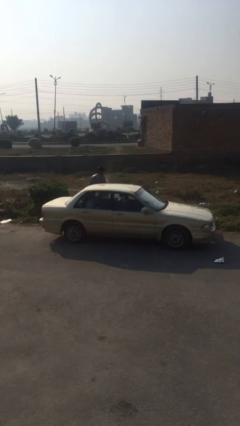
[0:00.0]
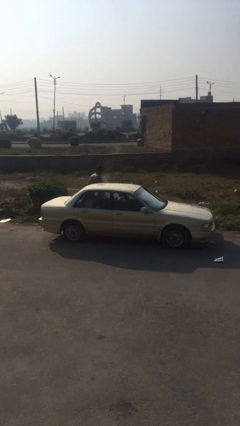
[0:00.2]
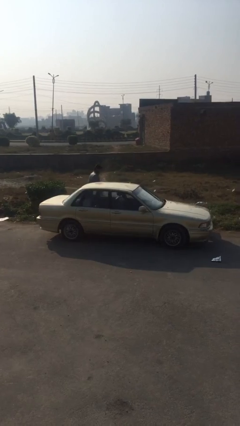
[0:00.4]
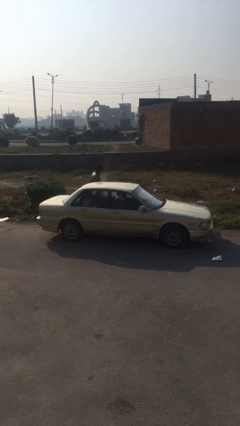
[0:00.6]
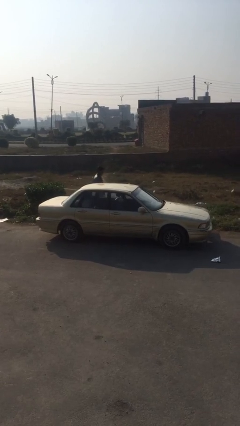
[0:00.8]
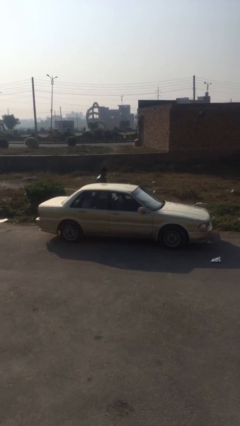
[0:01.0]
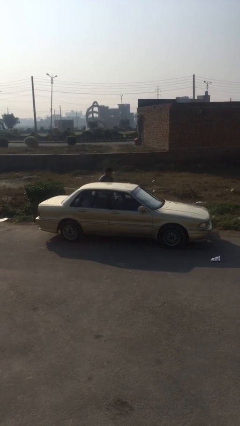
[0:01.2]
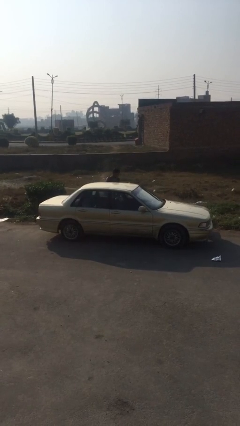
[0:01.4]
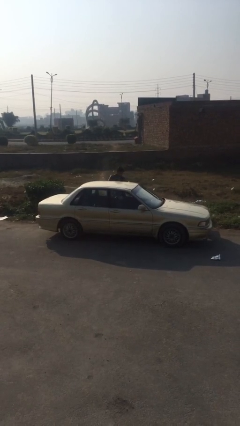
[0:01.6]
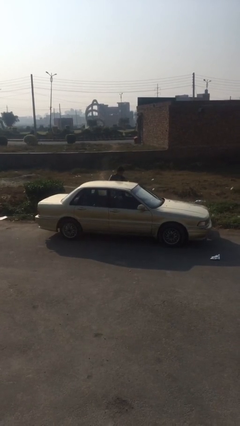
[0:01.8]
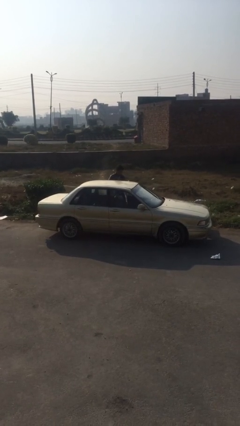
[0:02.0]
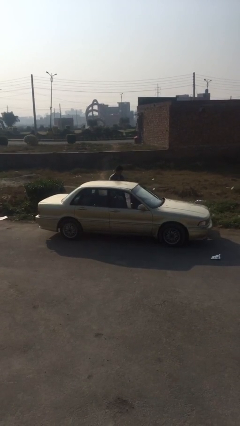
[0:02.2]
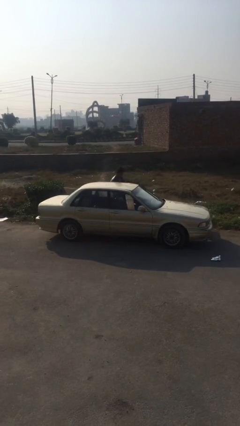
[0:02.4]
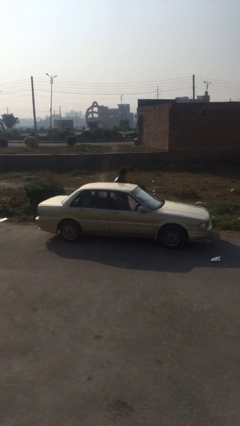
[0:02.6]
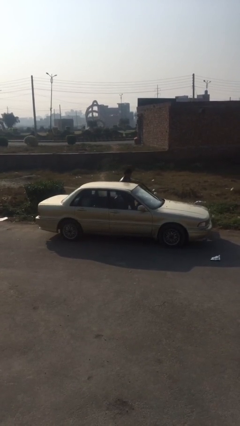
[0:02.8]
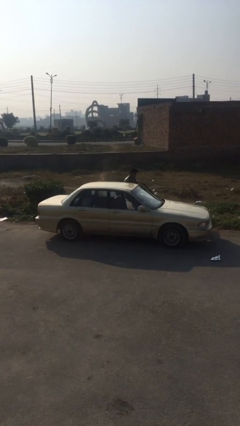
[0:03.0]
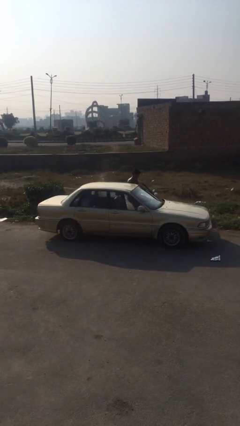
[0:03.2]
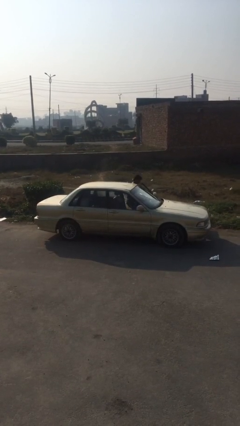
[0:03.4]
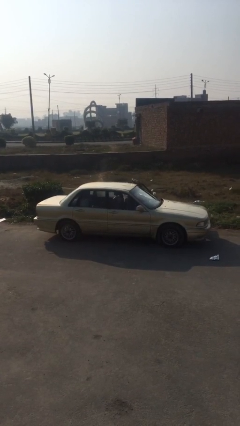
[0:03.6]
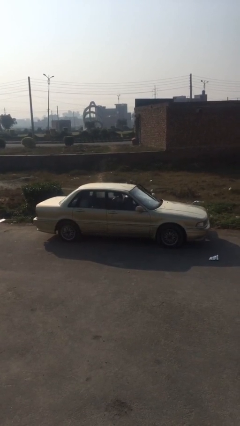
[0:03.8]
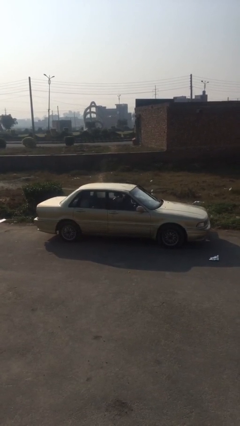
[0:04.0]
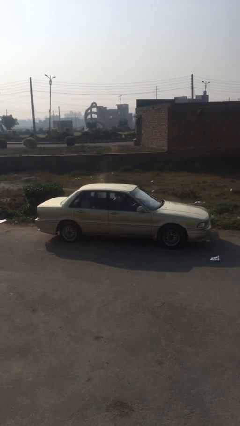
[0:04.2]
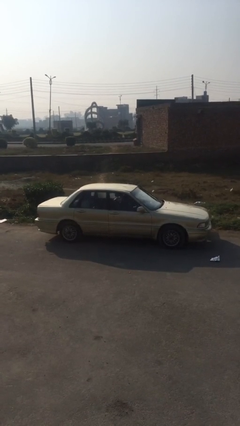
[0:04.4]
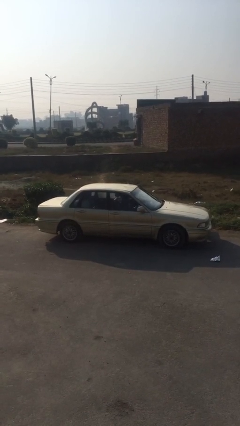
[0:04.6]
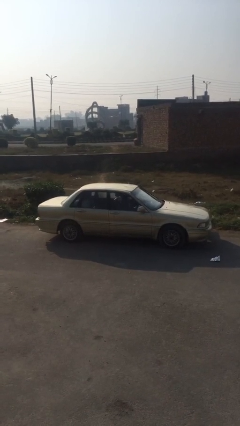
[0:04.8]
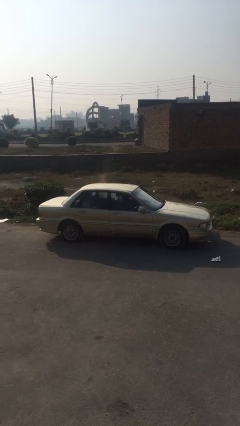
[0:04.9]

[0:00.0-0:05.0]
car picks up person

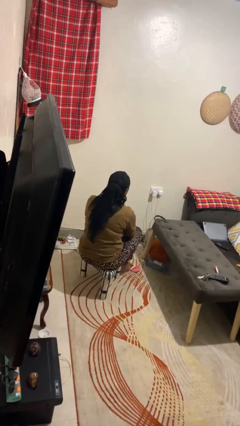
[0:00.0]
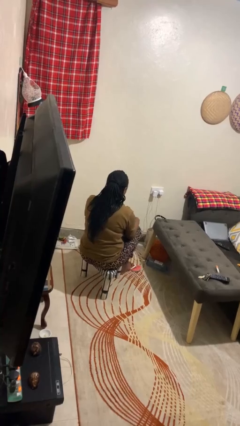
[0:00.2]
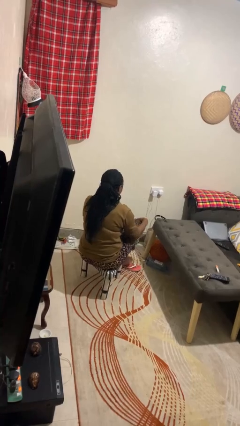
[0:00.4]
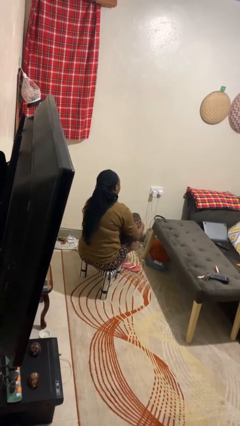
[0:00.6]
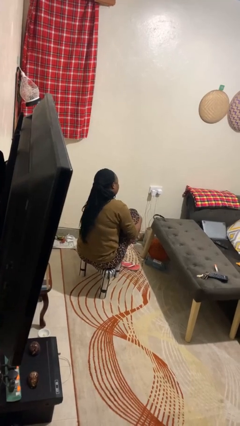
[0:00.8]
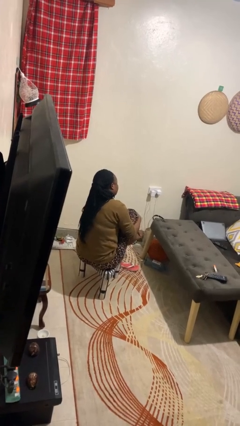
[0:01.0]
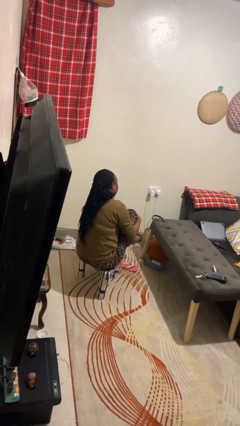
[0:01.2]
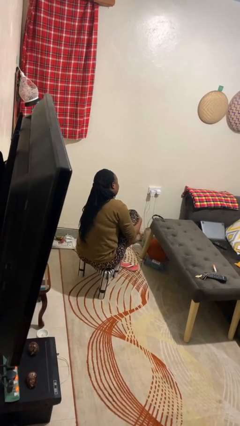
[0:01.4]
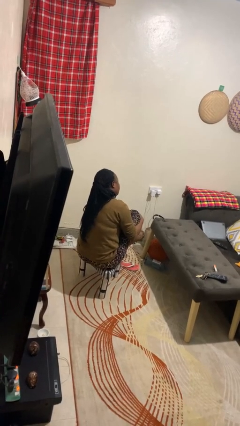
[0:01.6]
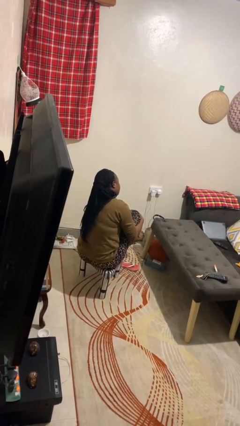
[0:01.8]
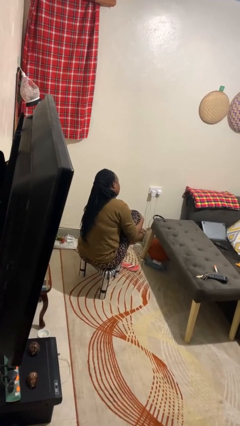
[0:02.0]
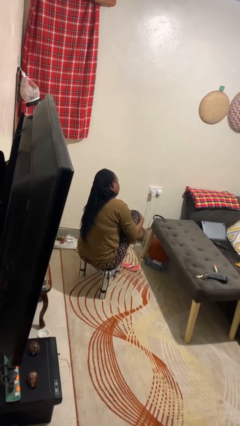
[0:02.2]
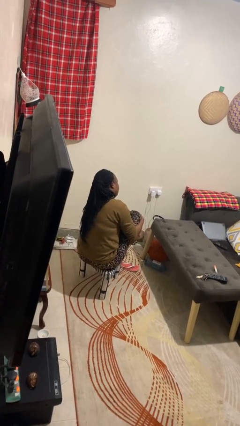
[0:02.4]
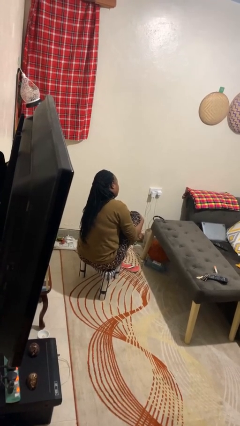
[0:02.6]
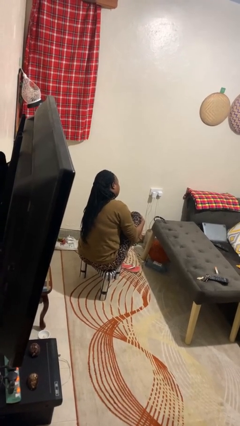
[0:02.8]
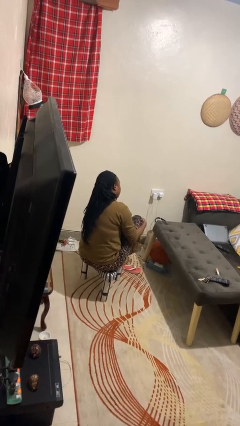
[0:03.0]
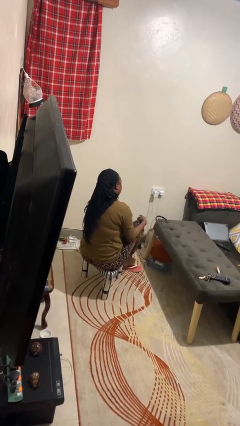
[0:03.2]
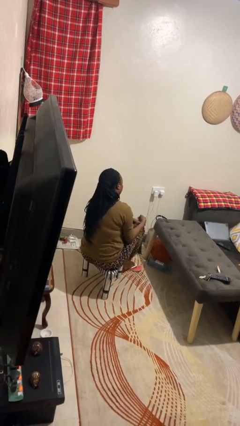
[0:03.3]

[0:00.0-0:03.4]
person rubs foot

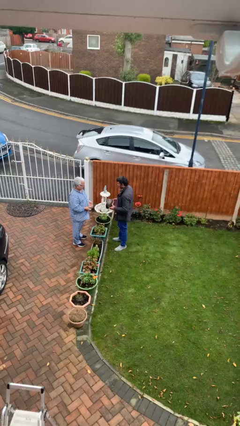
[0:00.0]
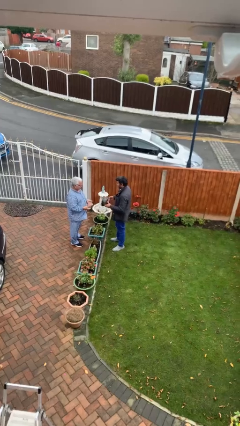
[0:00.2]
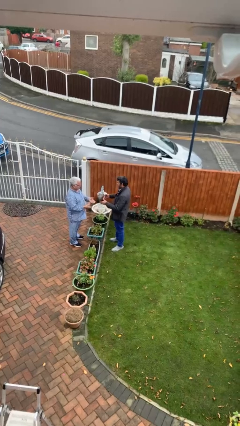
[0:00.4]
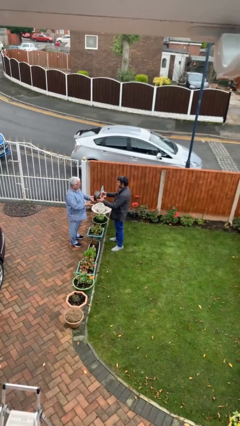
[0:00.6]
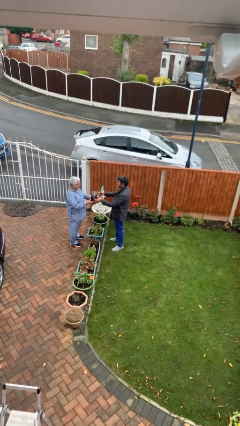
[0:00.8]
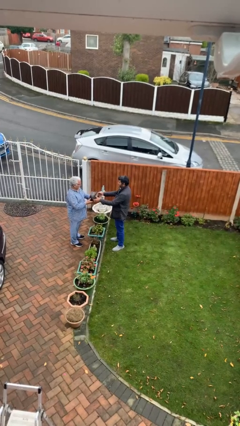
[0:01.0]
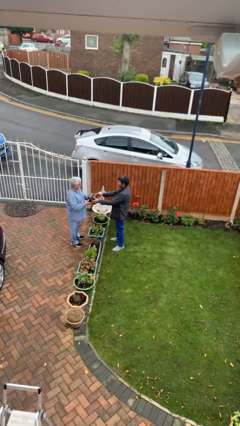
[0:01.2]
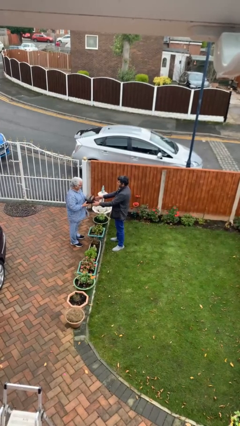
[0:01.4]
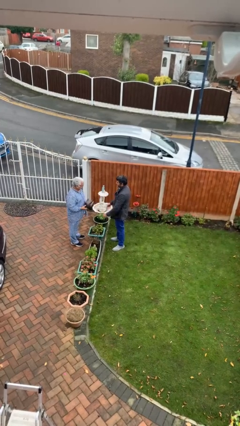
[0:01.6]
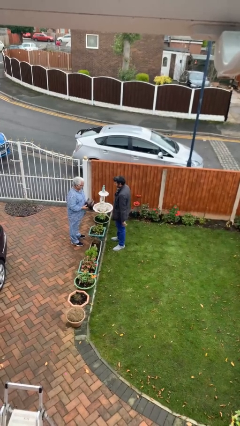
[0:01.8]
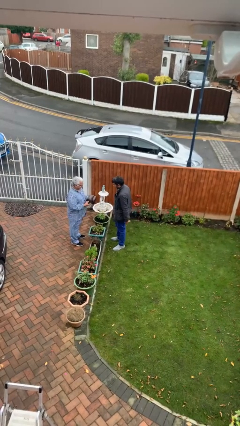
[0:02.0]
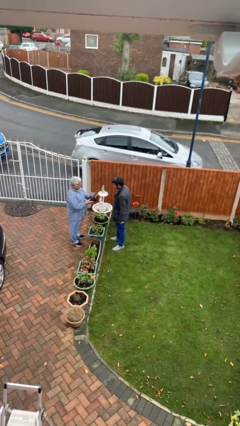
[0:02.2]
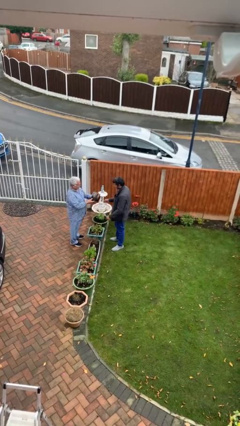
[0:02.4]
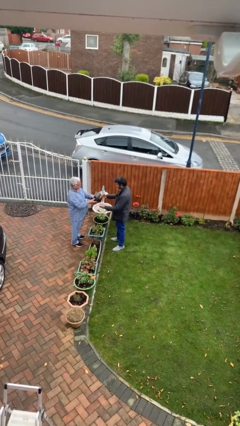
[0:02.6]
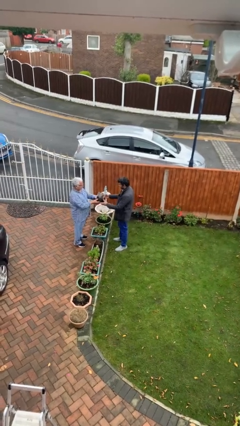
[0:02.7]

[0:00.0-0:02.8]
person transfers object to person

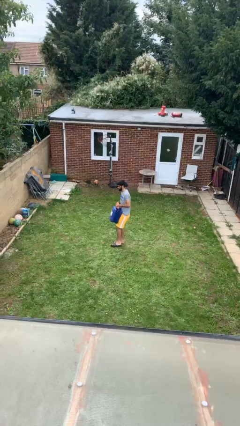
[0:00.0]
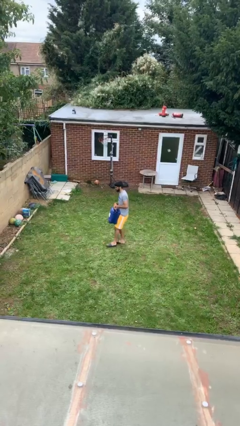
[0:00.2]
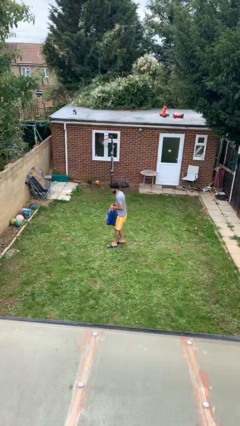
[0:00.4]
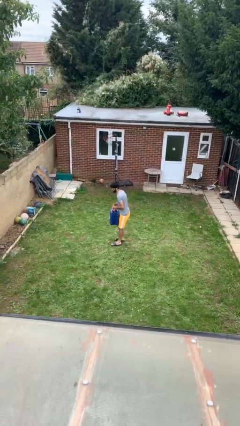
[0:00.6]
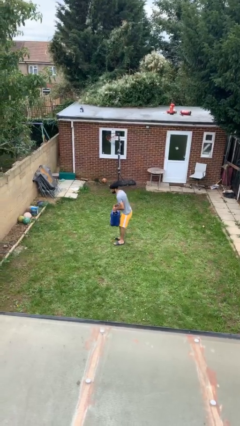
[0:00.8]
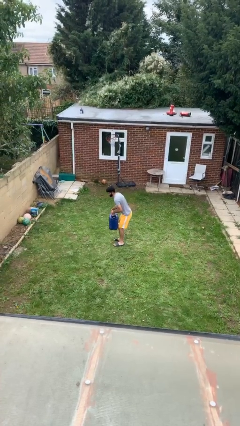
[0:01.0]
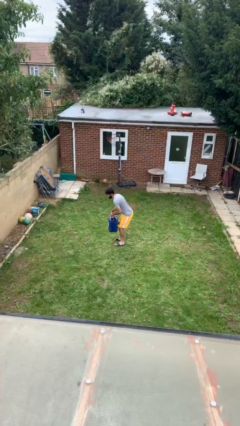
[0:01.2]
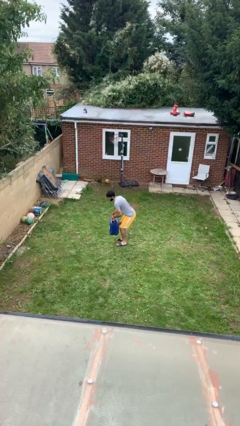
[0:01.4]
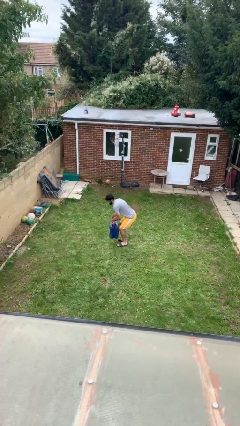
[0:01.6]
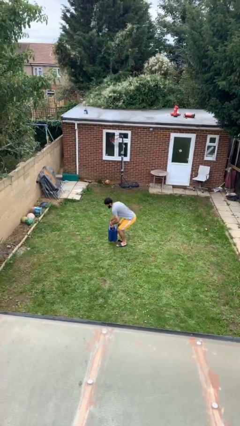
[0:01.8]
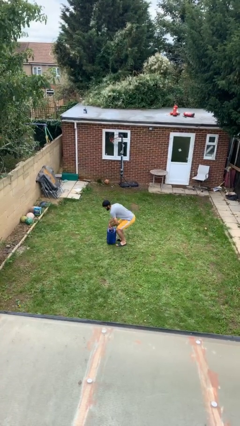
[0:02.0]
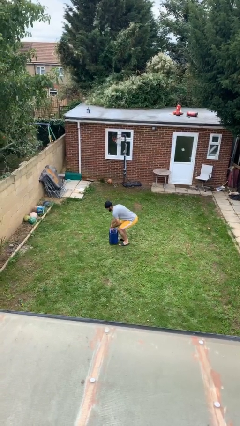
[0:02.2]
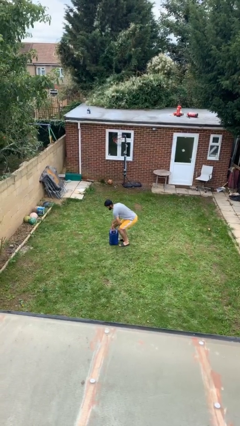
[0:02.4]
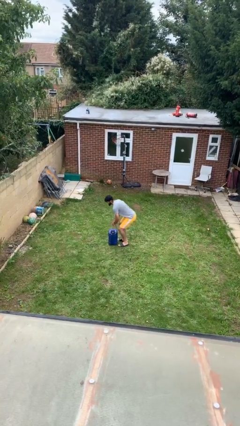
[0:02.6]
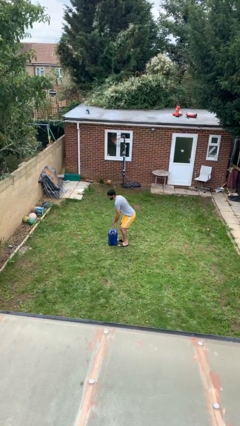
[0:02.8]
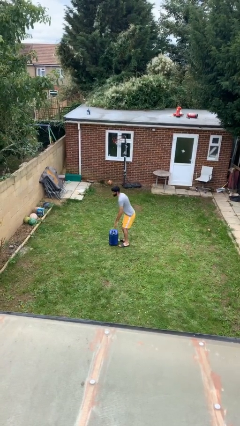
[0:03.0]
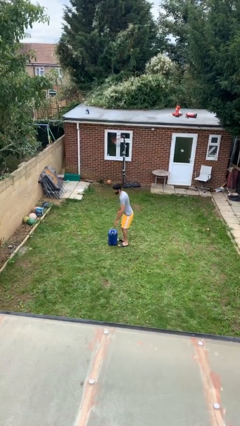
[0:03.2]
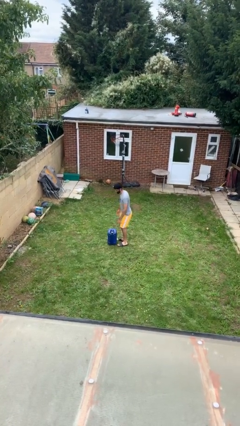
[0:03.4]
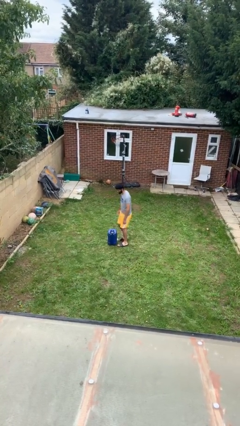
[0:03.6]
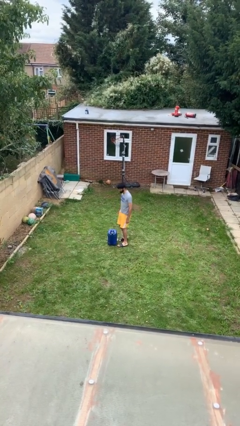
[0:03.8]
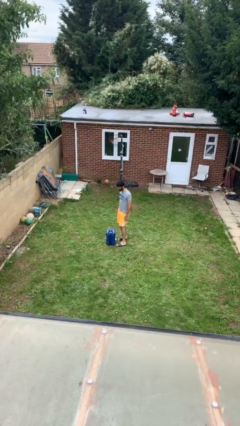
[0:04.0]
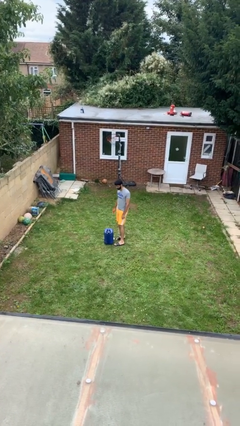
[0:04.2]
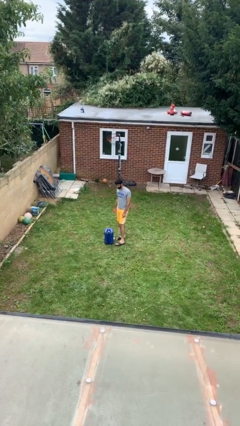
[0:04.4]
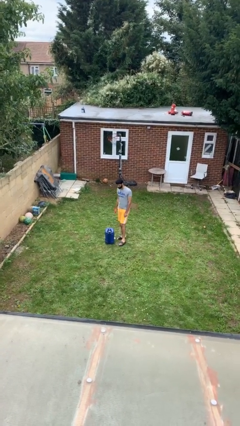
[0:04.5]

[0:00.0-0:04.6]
person puts down object on floor

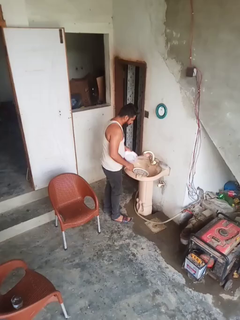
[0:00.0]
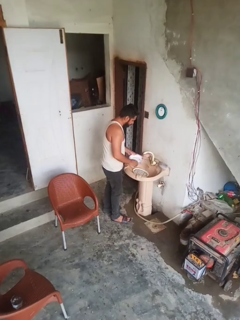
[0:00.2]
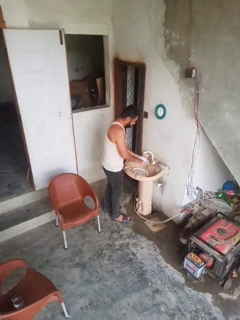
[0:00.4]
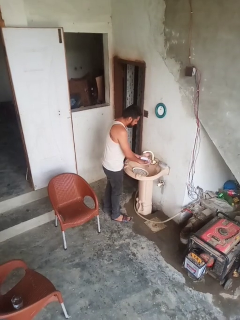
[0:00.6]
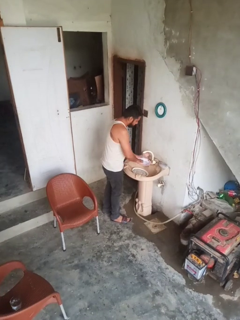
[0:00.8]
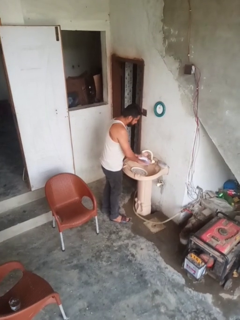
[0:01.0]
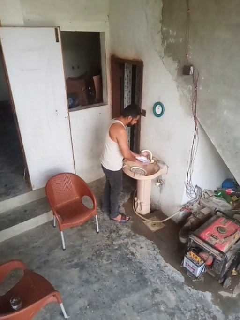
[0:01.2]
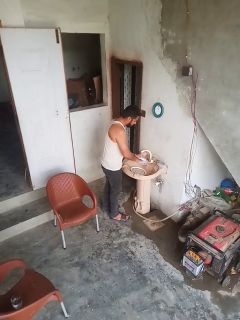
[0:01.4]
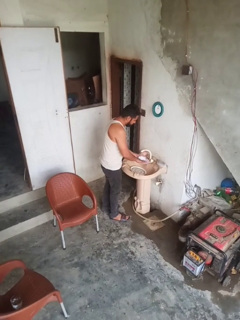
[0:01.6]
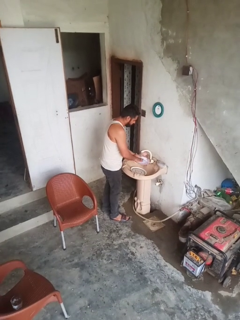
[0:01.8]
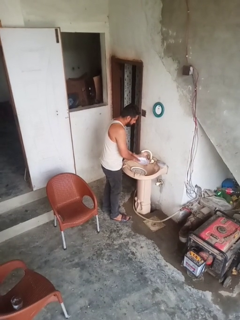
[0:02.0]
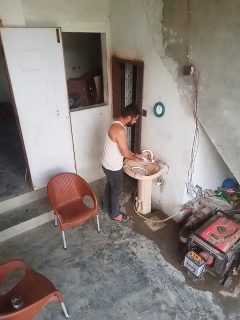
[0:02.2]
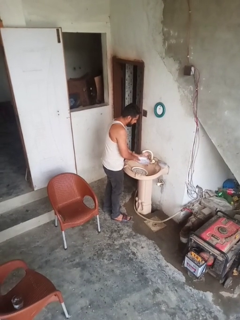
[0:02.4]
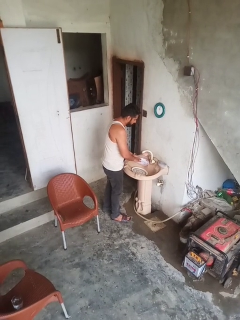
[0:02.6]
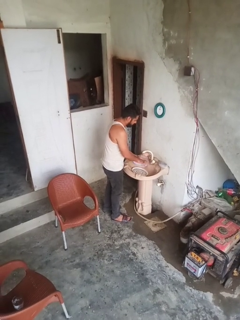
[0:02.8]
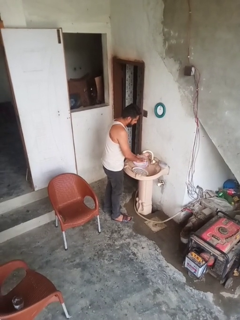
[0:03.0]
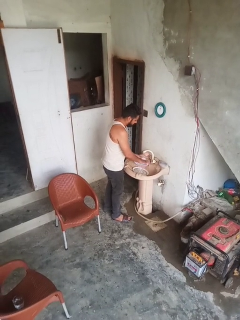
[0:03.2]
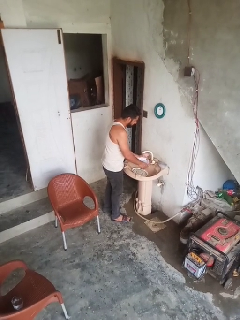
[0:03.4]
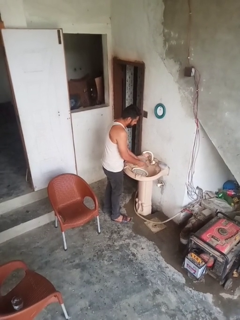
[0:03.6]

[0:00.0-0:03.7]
person washes dish
